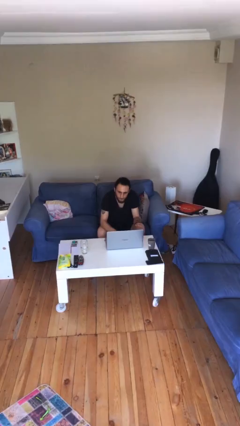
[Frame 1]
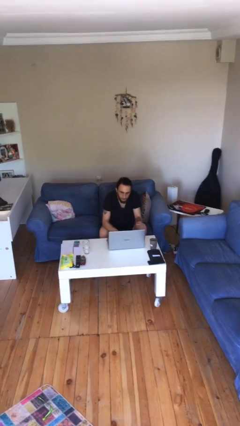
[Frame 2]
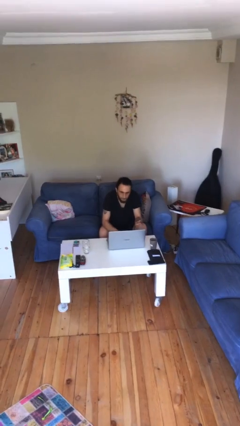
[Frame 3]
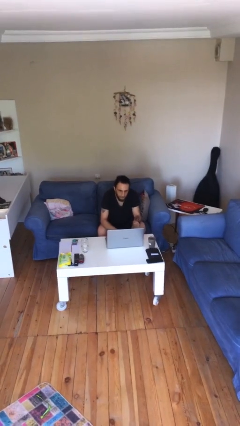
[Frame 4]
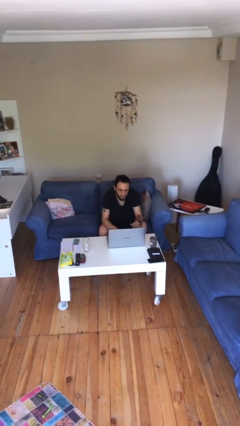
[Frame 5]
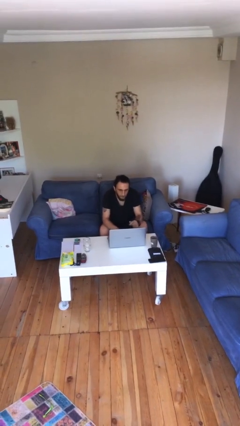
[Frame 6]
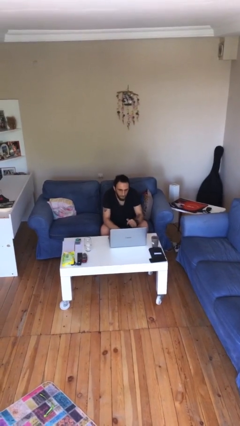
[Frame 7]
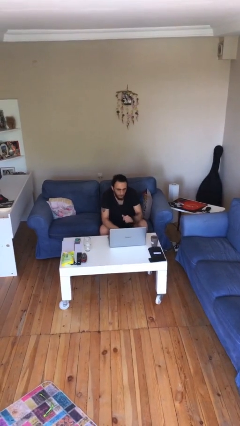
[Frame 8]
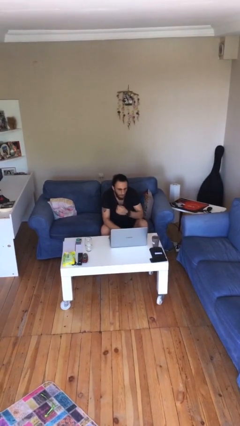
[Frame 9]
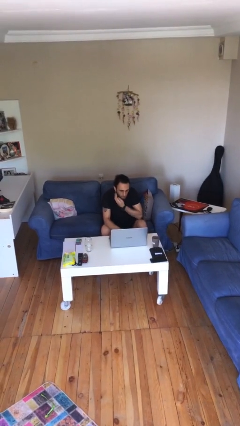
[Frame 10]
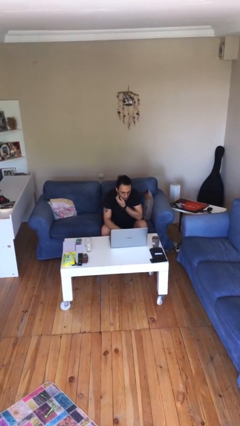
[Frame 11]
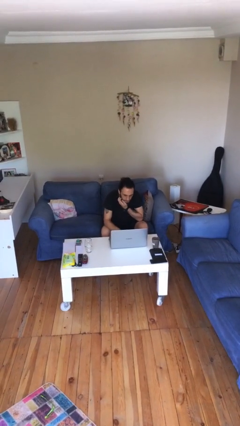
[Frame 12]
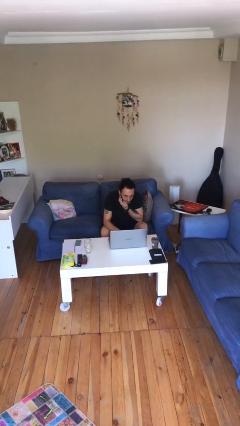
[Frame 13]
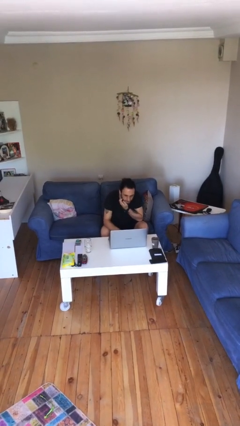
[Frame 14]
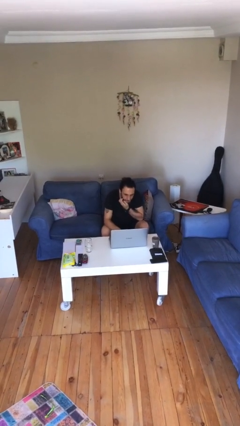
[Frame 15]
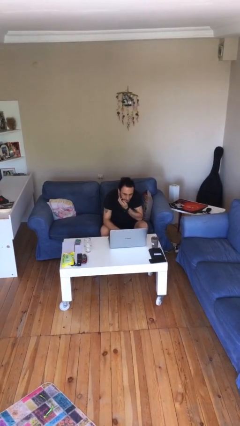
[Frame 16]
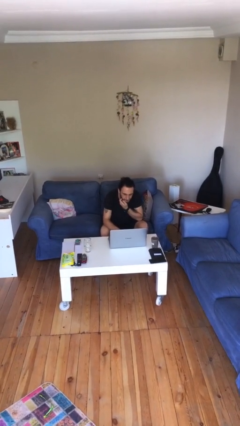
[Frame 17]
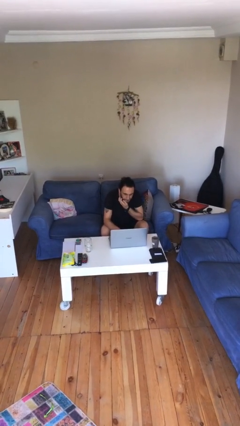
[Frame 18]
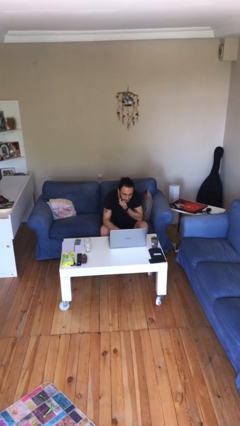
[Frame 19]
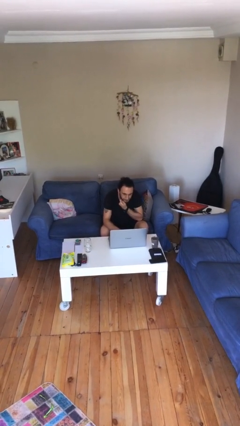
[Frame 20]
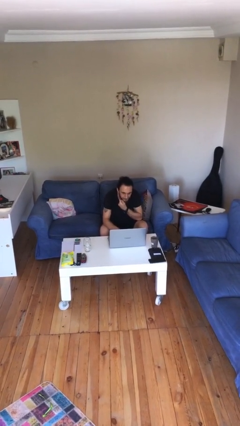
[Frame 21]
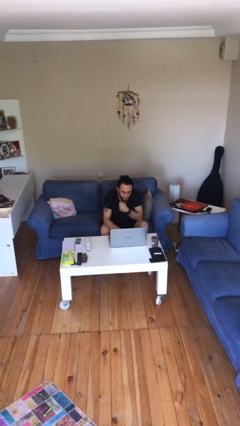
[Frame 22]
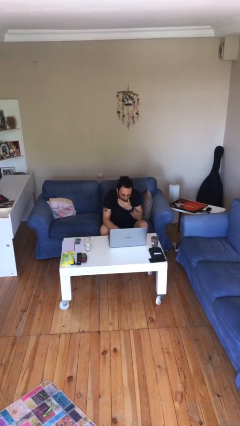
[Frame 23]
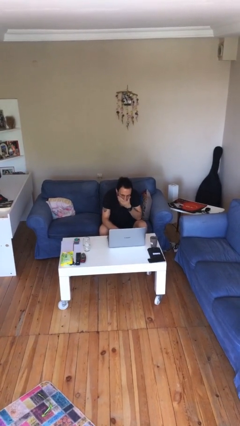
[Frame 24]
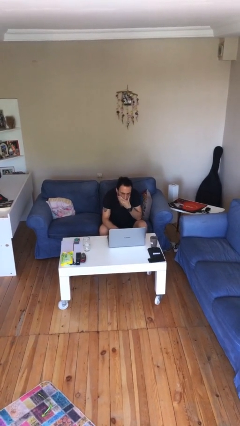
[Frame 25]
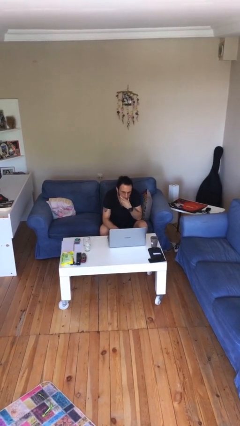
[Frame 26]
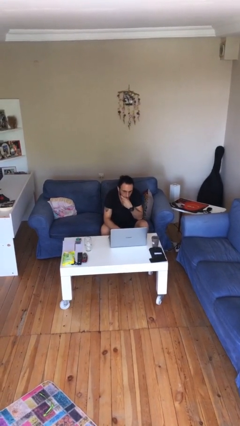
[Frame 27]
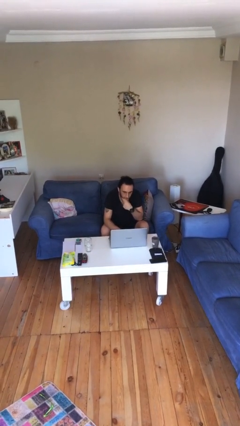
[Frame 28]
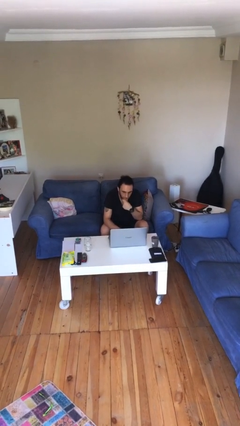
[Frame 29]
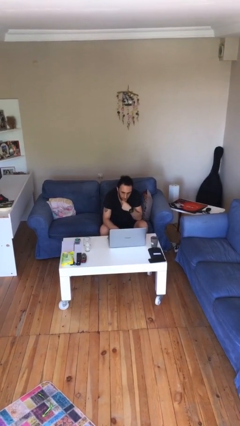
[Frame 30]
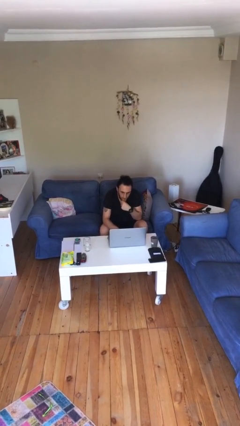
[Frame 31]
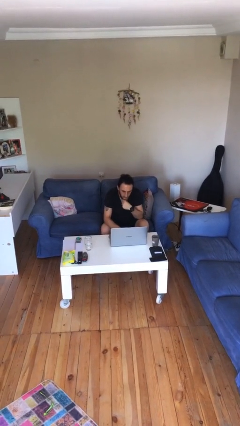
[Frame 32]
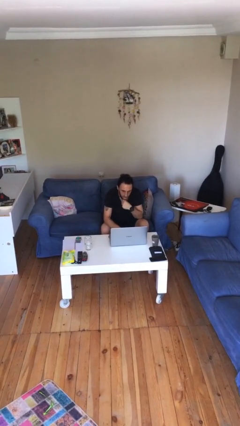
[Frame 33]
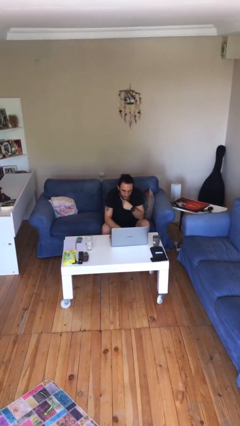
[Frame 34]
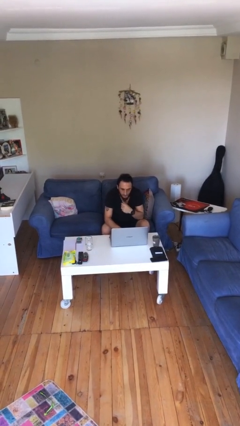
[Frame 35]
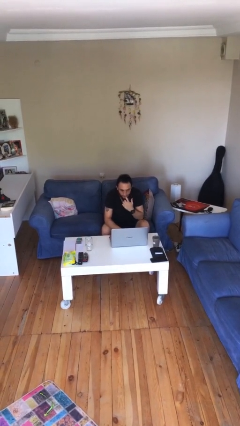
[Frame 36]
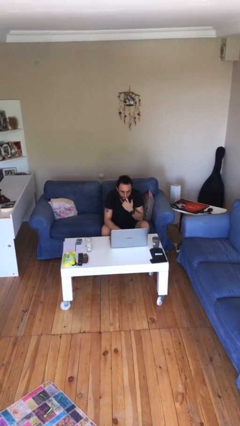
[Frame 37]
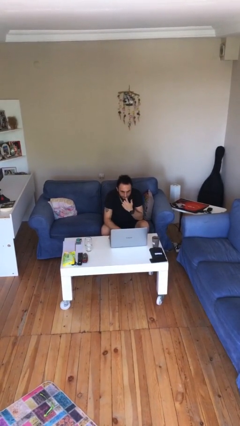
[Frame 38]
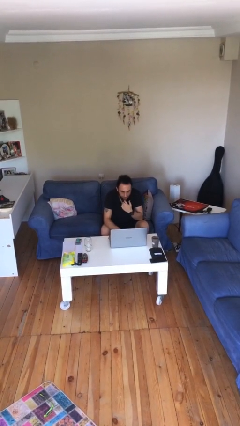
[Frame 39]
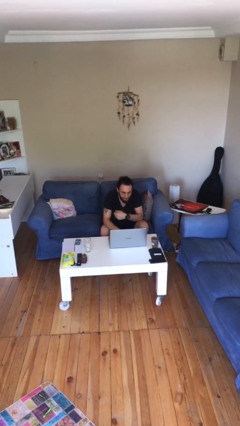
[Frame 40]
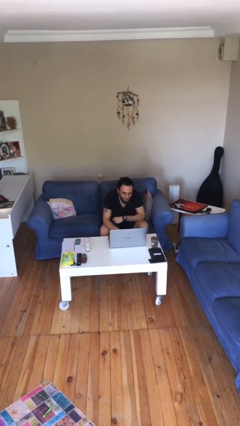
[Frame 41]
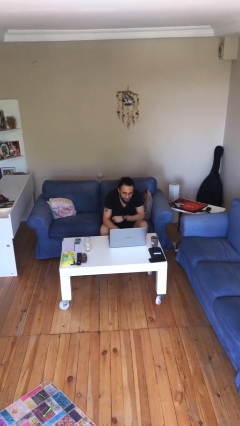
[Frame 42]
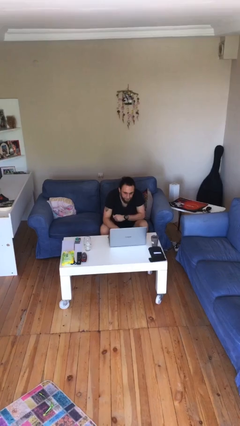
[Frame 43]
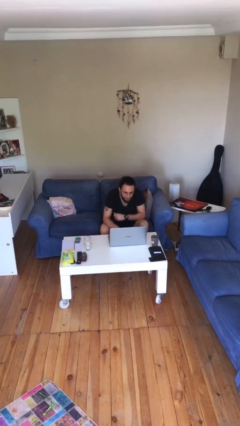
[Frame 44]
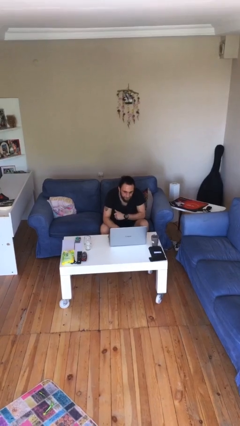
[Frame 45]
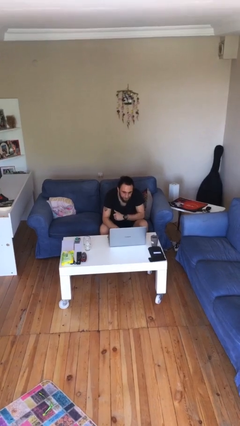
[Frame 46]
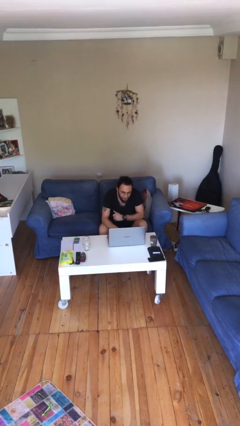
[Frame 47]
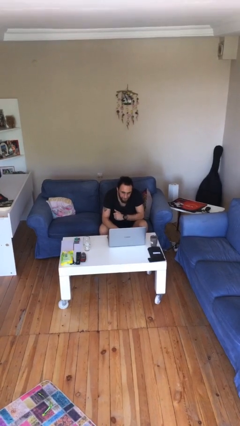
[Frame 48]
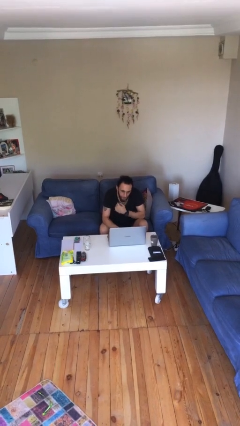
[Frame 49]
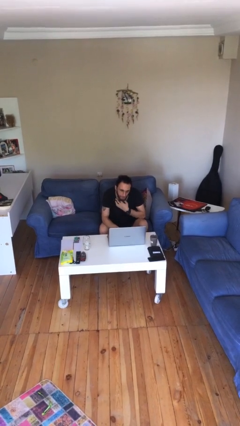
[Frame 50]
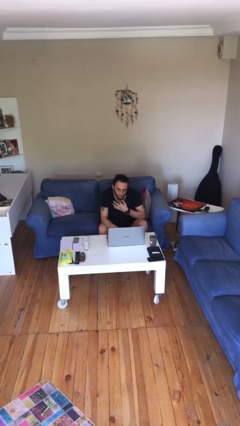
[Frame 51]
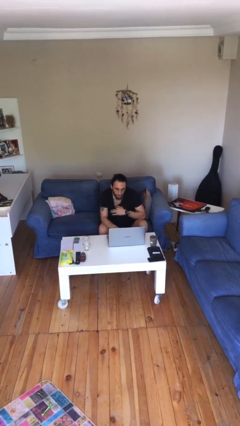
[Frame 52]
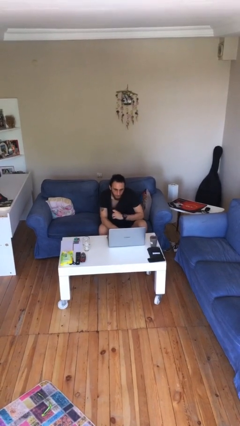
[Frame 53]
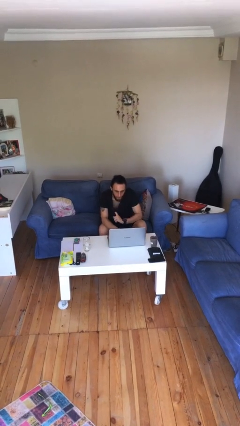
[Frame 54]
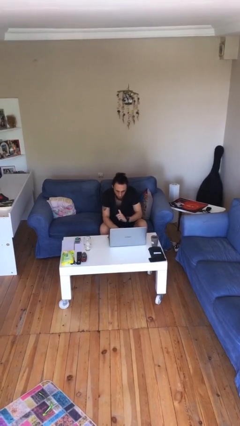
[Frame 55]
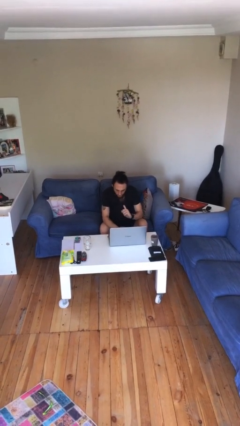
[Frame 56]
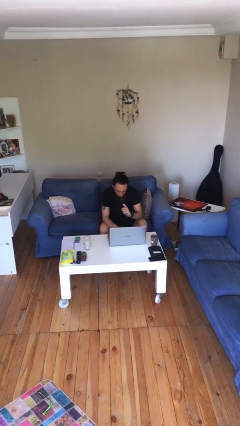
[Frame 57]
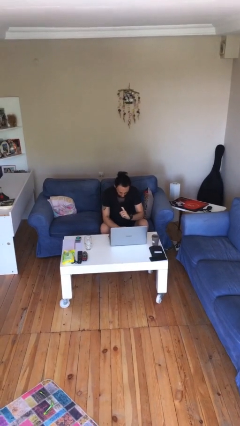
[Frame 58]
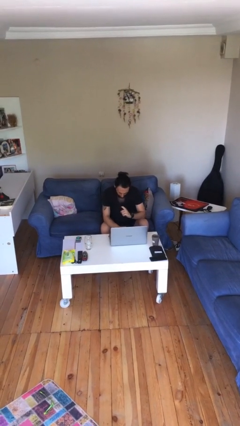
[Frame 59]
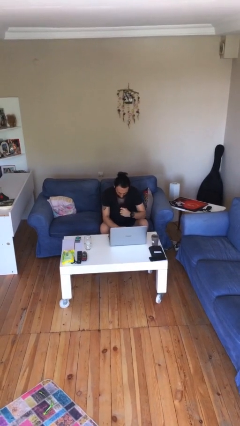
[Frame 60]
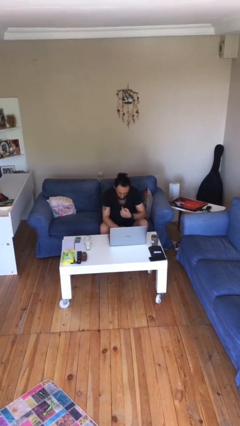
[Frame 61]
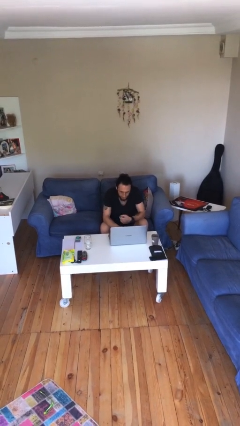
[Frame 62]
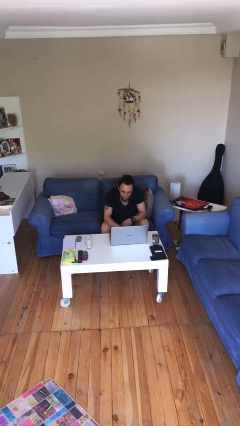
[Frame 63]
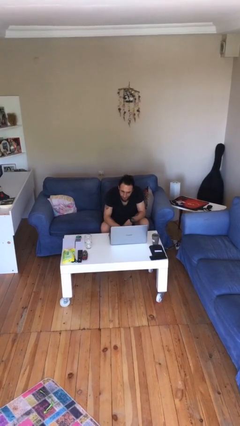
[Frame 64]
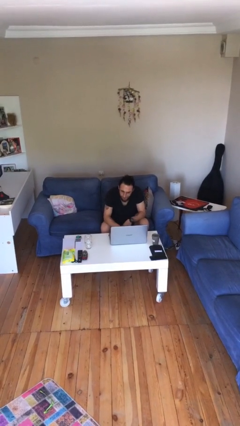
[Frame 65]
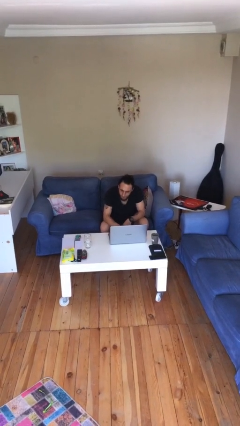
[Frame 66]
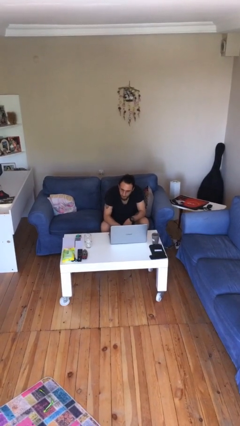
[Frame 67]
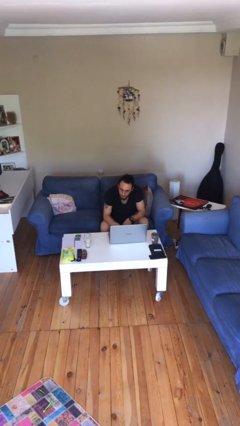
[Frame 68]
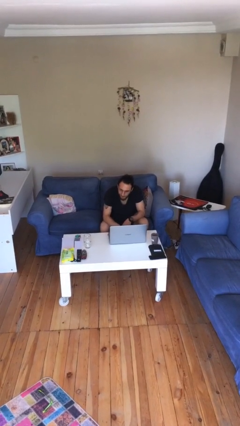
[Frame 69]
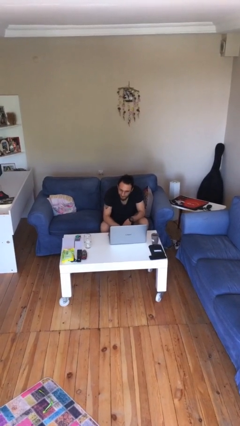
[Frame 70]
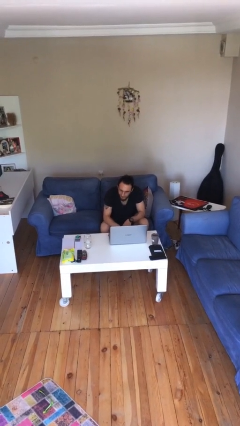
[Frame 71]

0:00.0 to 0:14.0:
person interacts with laptop

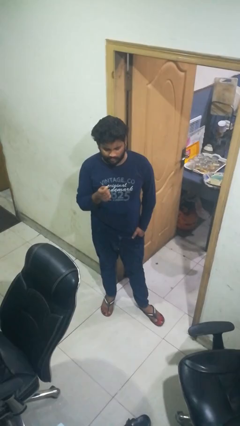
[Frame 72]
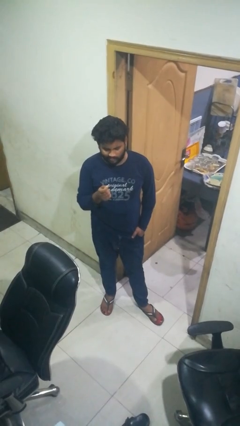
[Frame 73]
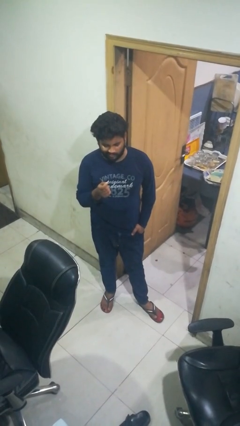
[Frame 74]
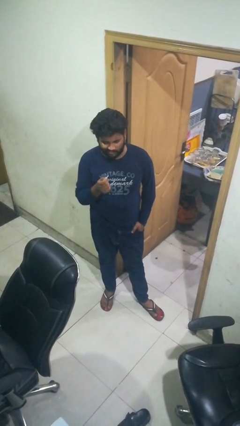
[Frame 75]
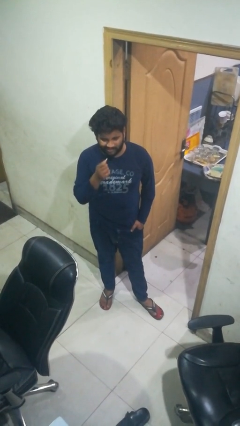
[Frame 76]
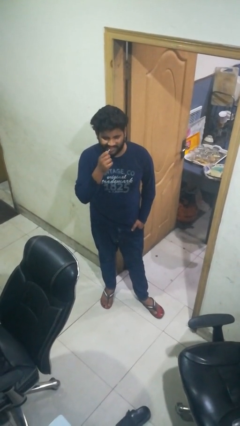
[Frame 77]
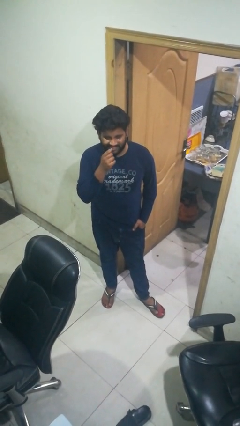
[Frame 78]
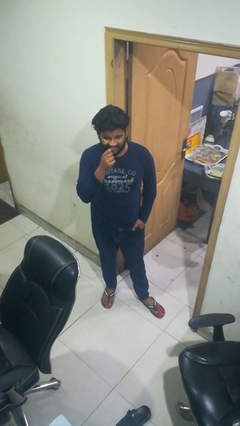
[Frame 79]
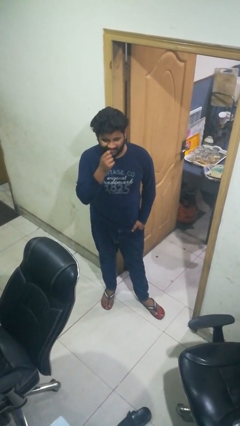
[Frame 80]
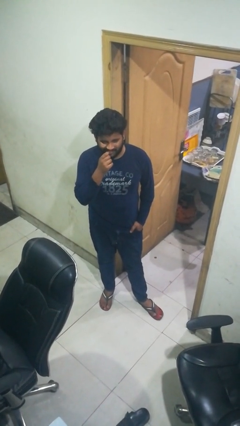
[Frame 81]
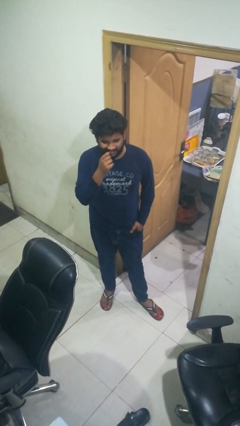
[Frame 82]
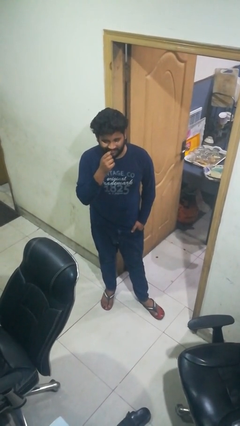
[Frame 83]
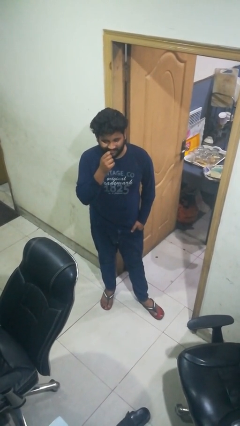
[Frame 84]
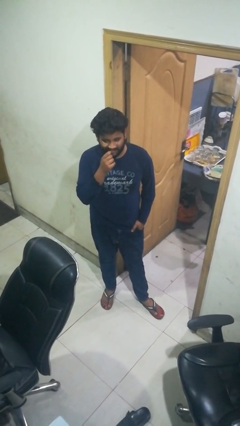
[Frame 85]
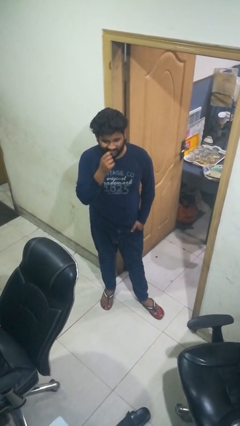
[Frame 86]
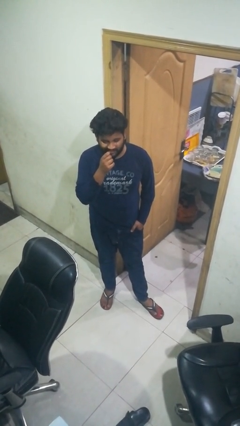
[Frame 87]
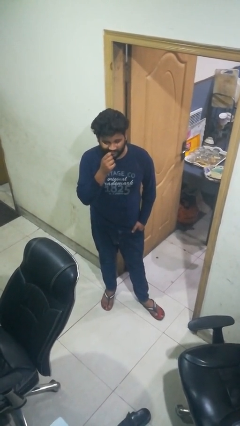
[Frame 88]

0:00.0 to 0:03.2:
person flosses

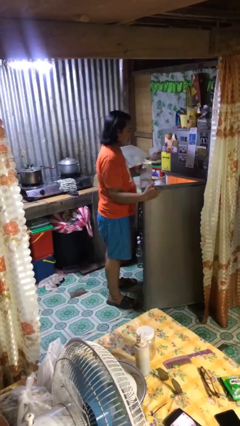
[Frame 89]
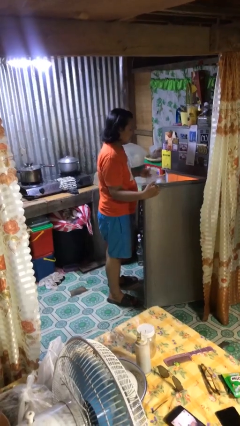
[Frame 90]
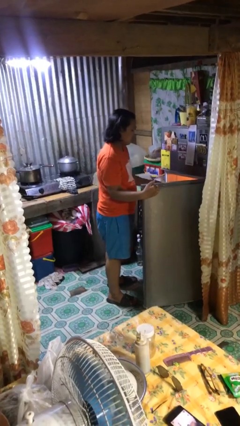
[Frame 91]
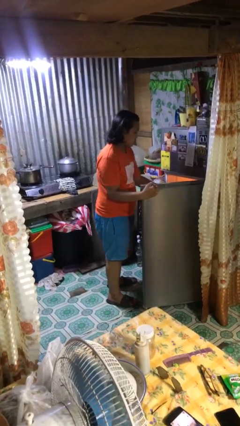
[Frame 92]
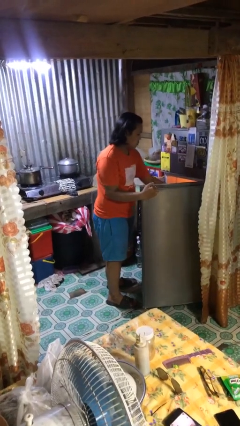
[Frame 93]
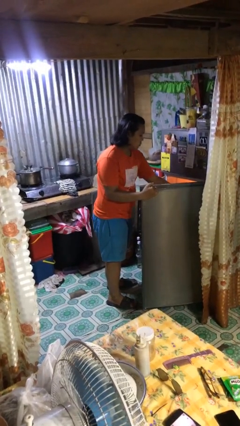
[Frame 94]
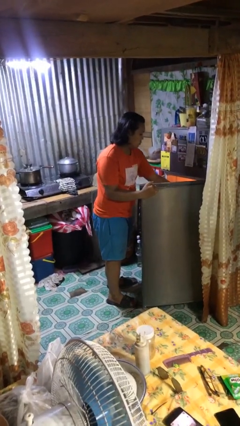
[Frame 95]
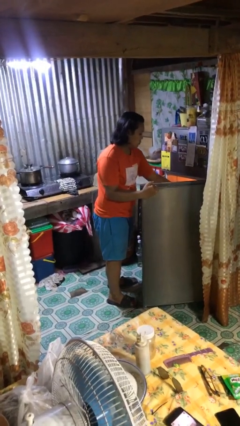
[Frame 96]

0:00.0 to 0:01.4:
person puts object into refrigerator
